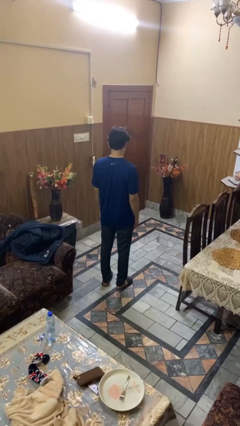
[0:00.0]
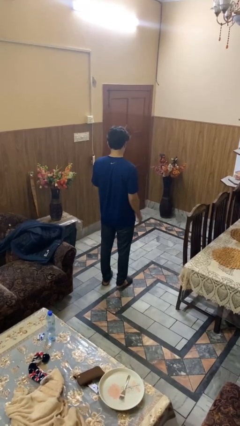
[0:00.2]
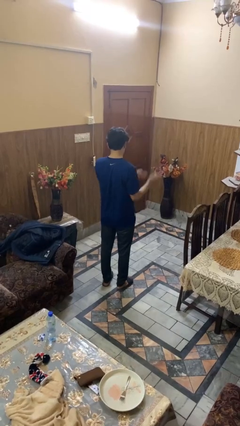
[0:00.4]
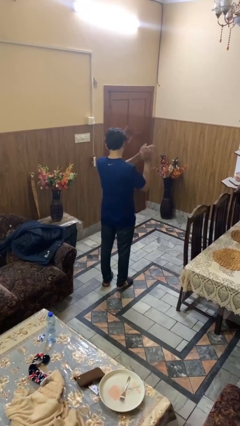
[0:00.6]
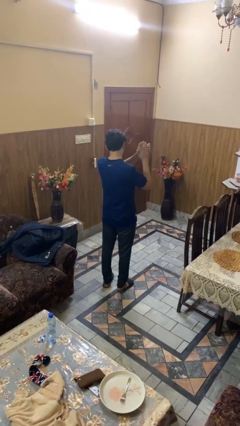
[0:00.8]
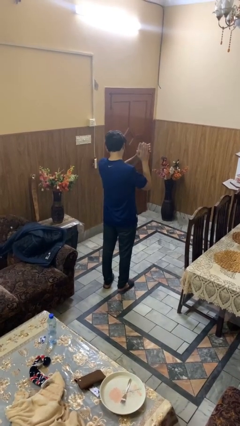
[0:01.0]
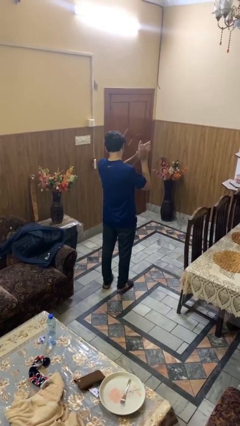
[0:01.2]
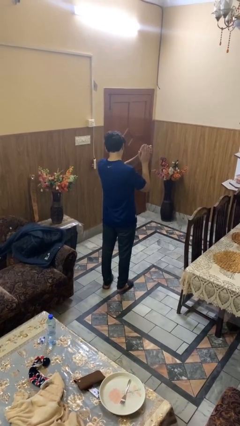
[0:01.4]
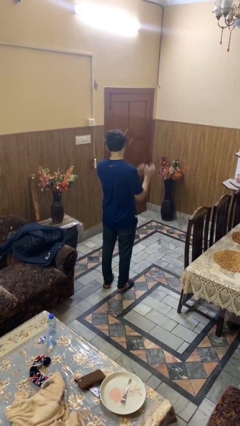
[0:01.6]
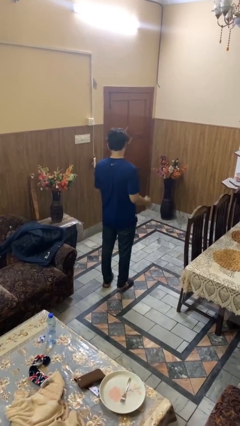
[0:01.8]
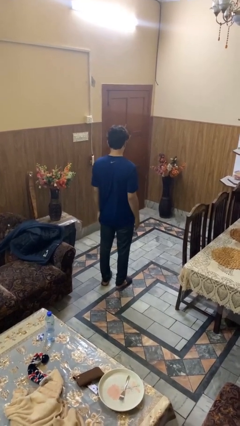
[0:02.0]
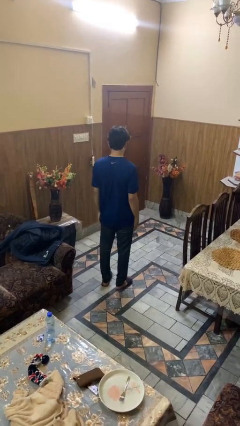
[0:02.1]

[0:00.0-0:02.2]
person claps hands

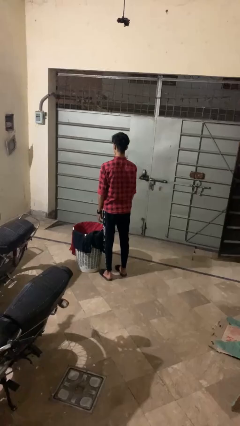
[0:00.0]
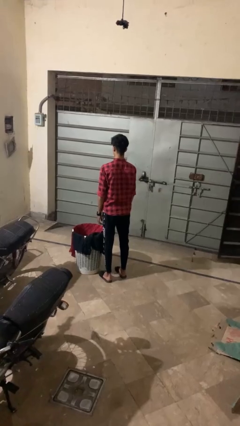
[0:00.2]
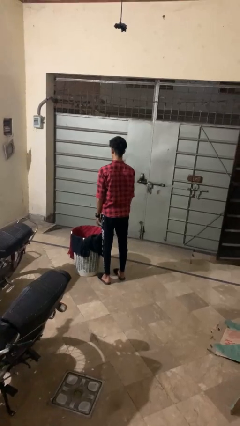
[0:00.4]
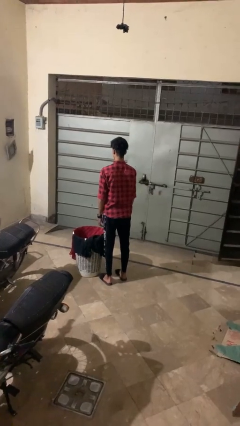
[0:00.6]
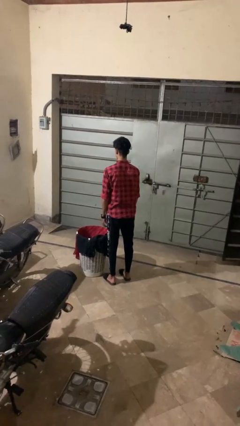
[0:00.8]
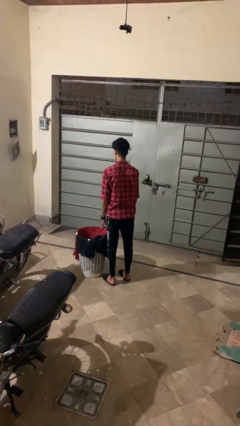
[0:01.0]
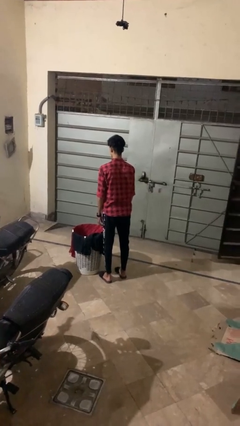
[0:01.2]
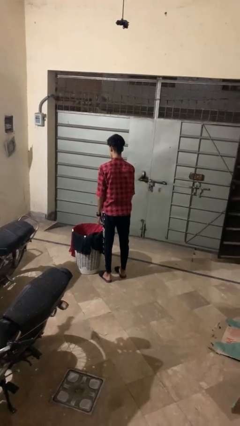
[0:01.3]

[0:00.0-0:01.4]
person carries laundry basket

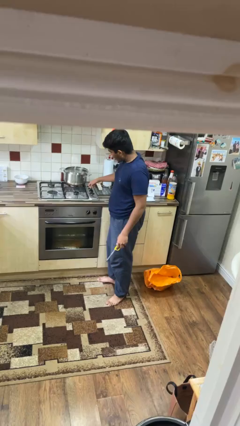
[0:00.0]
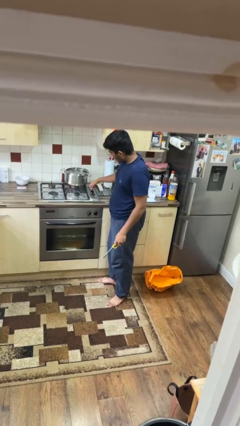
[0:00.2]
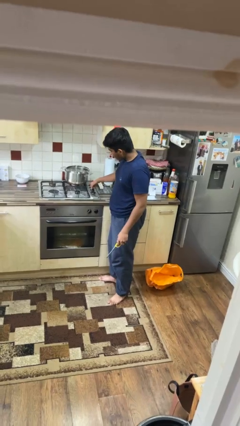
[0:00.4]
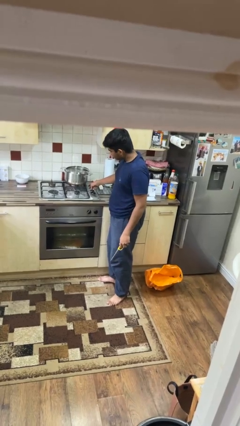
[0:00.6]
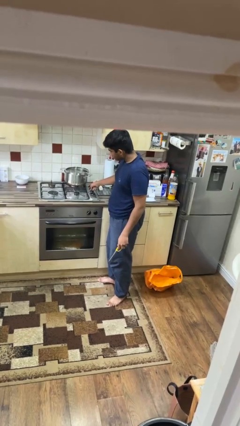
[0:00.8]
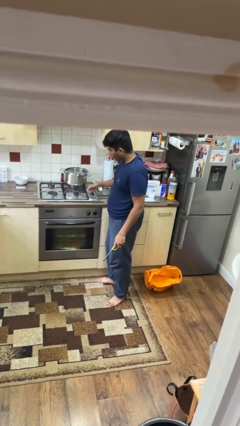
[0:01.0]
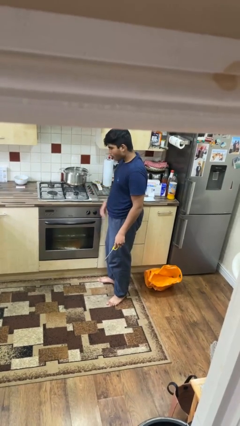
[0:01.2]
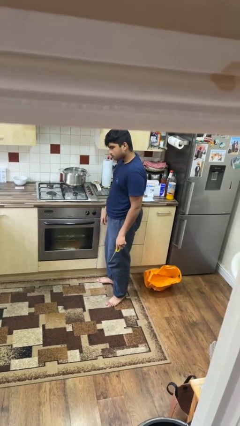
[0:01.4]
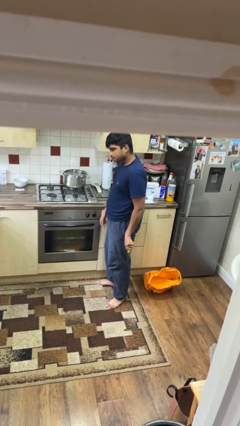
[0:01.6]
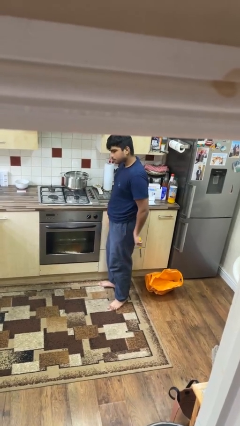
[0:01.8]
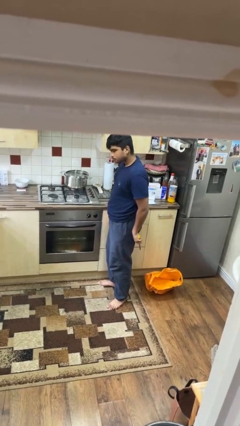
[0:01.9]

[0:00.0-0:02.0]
person turns off stovetop

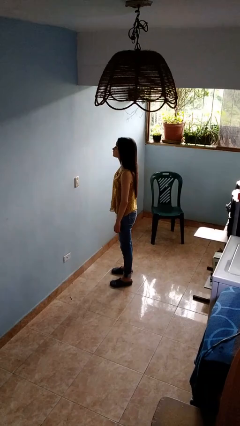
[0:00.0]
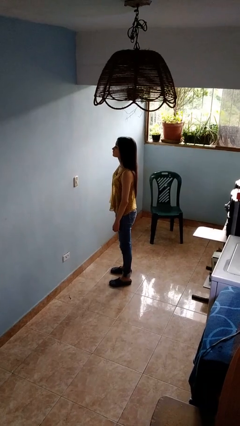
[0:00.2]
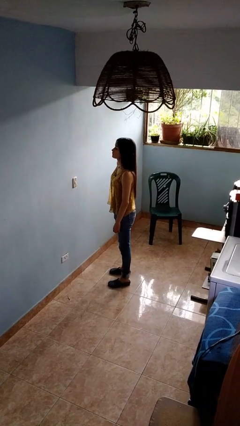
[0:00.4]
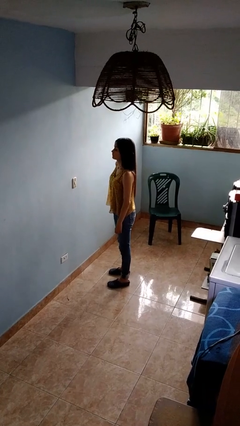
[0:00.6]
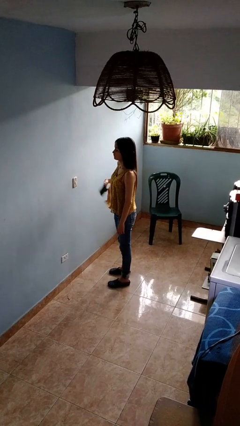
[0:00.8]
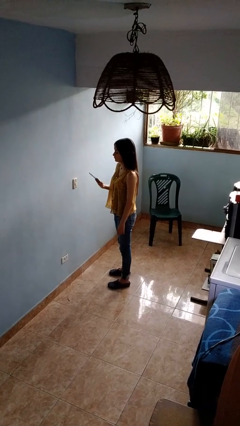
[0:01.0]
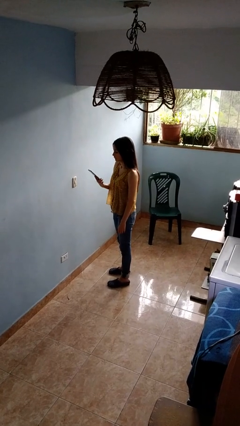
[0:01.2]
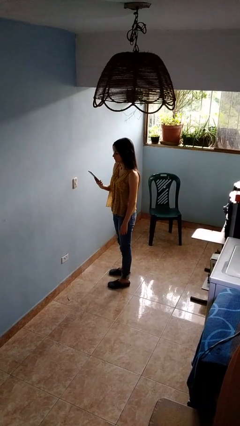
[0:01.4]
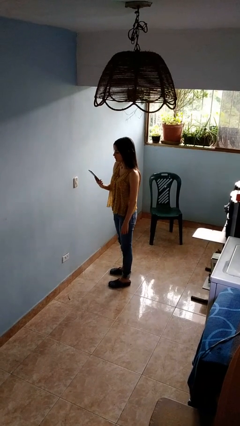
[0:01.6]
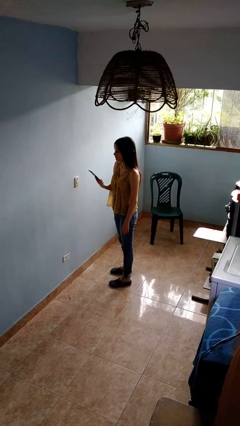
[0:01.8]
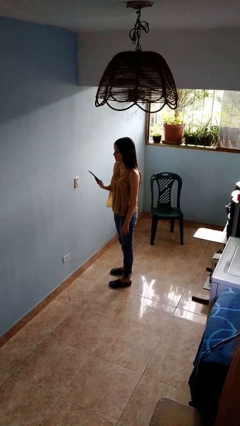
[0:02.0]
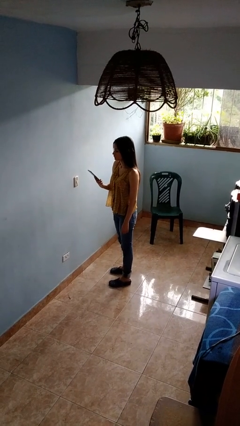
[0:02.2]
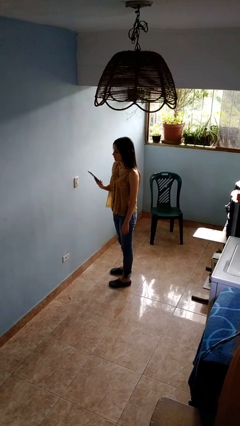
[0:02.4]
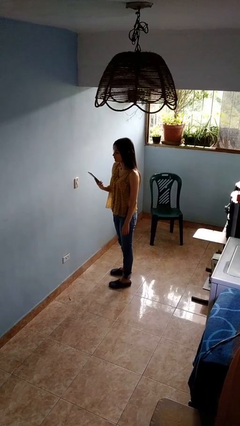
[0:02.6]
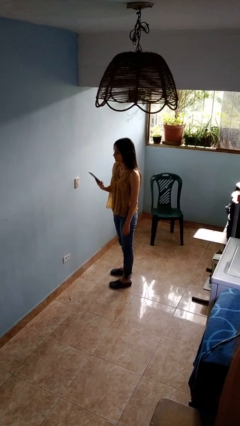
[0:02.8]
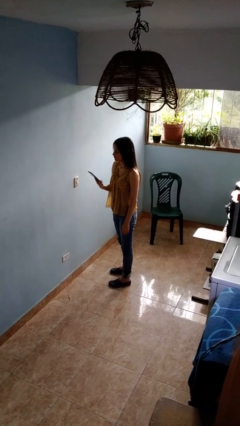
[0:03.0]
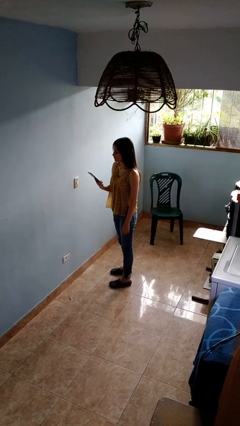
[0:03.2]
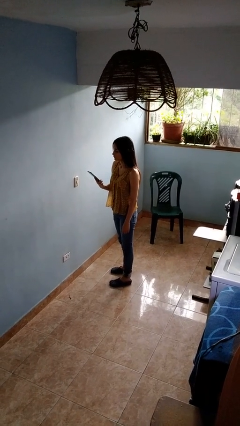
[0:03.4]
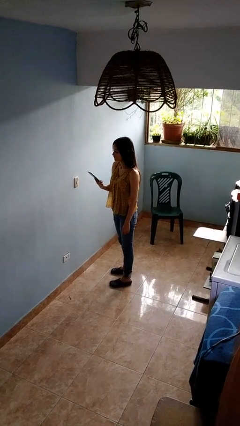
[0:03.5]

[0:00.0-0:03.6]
person takes phone from pocket

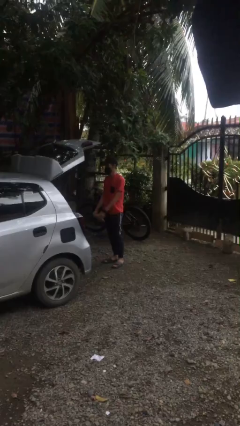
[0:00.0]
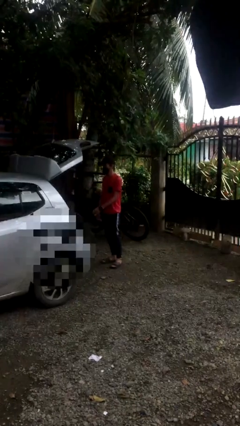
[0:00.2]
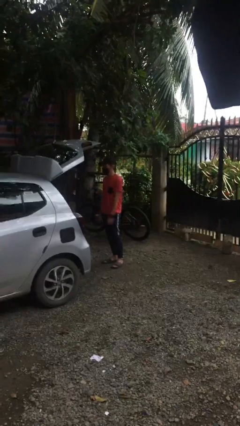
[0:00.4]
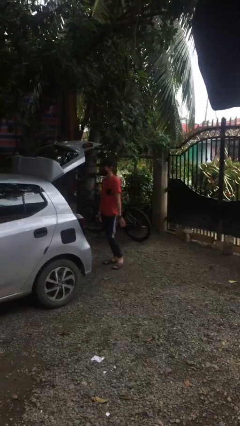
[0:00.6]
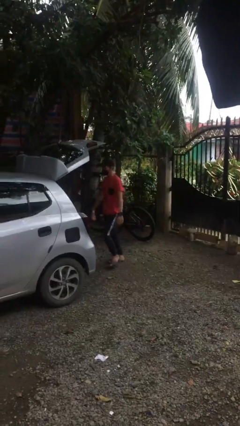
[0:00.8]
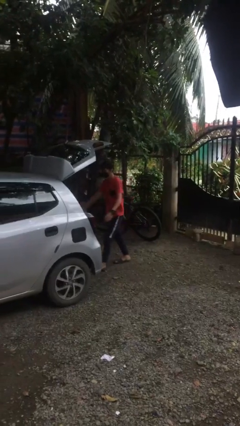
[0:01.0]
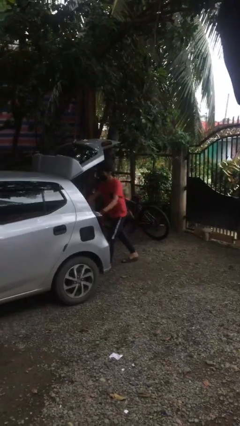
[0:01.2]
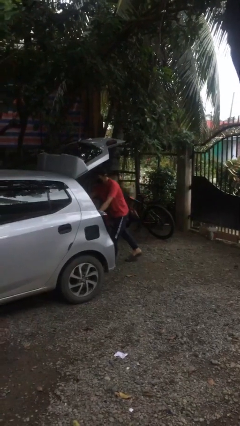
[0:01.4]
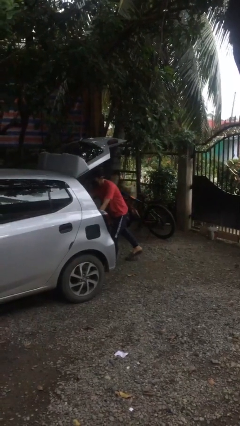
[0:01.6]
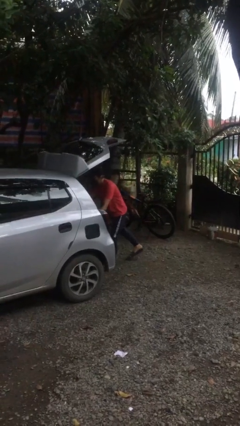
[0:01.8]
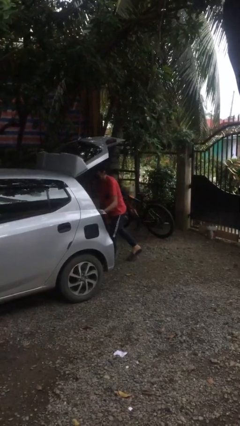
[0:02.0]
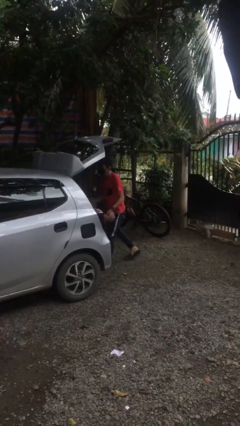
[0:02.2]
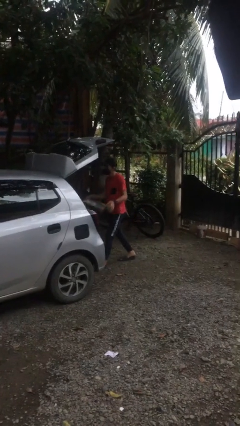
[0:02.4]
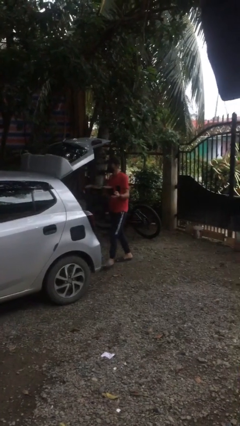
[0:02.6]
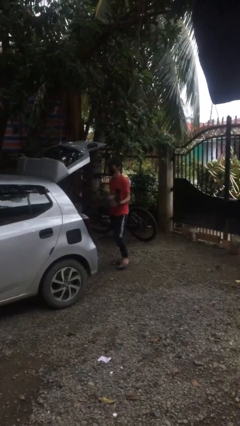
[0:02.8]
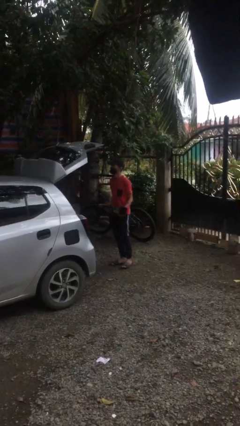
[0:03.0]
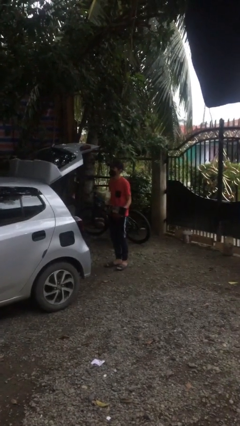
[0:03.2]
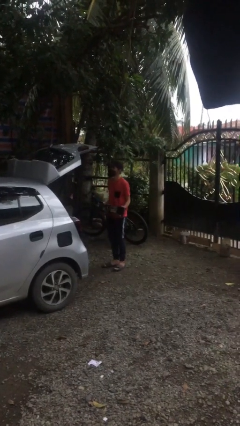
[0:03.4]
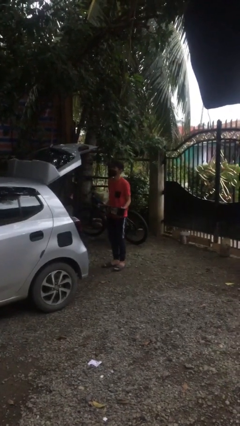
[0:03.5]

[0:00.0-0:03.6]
person unloads car

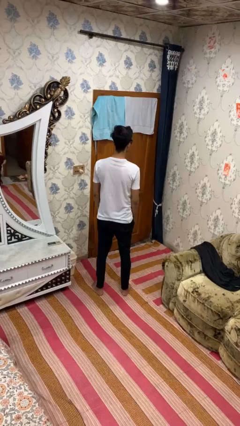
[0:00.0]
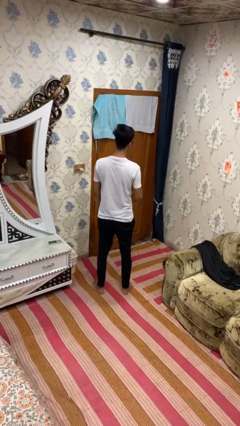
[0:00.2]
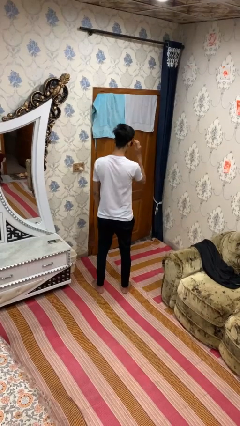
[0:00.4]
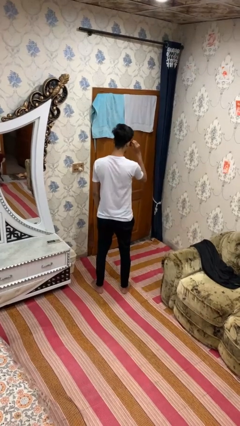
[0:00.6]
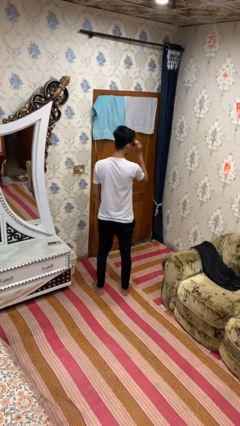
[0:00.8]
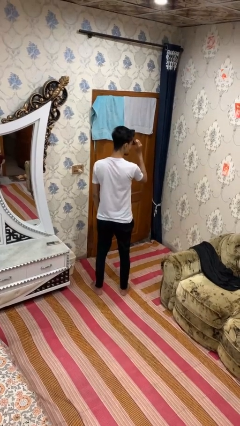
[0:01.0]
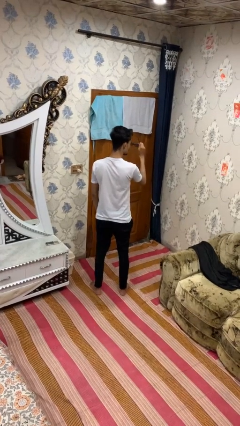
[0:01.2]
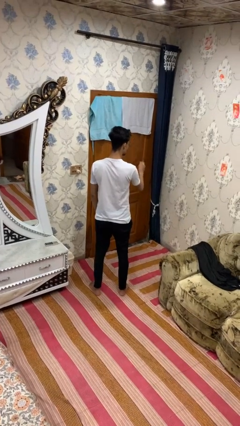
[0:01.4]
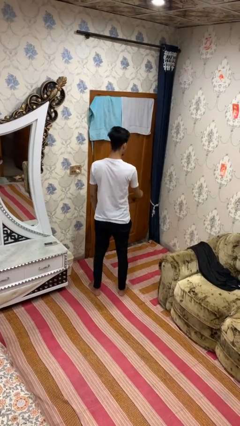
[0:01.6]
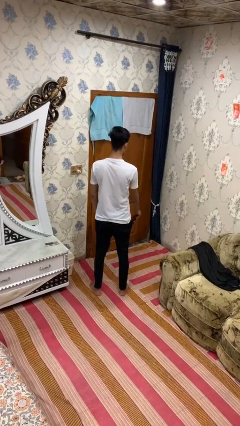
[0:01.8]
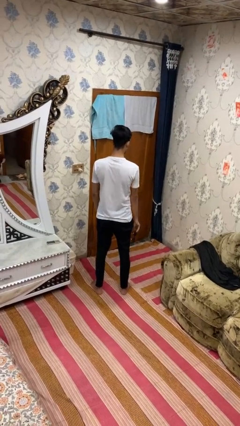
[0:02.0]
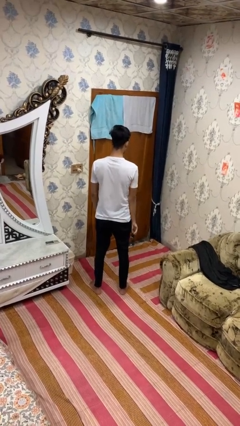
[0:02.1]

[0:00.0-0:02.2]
person takes off sunglasses

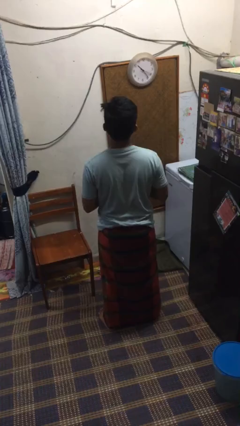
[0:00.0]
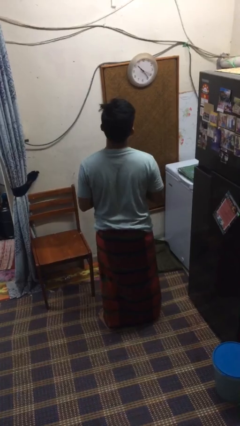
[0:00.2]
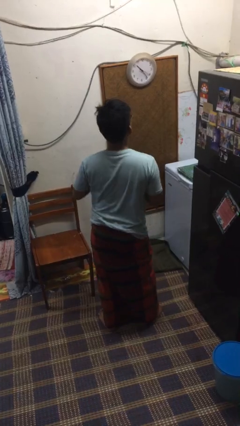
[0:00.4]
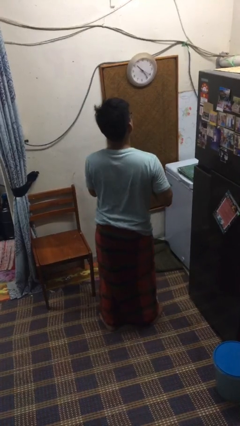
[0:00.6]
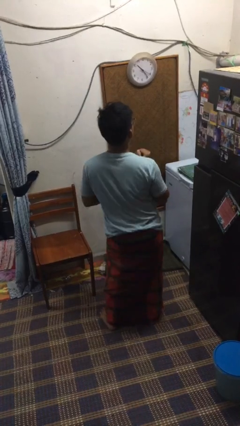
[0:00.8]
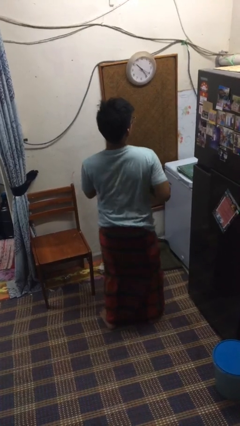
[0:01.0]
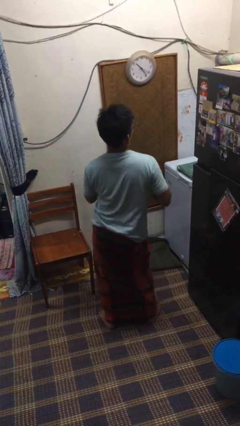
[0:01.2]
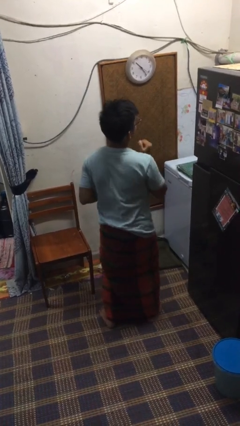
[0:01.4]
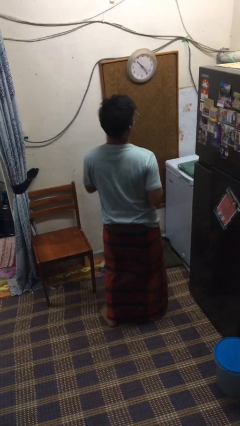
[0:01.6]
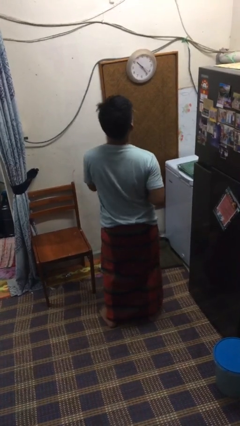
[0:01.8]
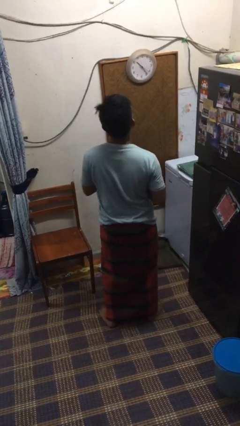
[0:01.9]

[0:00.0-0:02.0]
person wiggles hips
